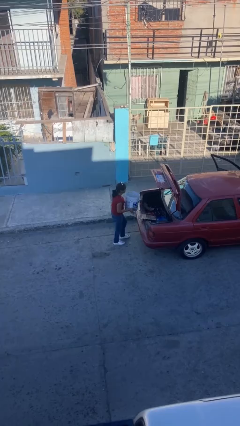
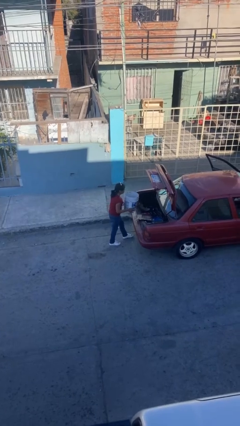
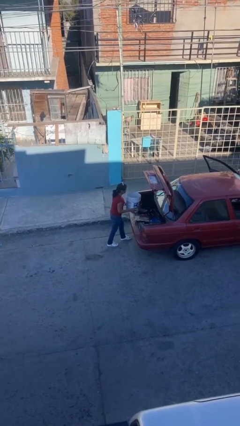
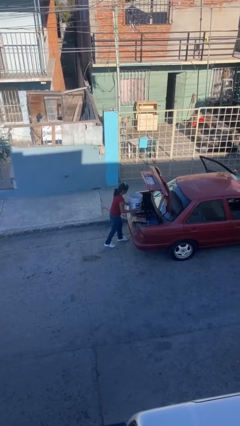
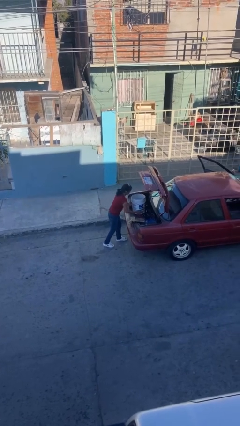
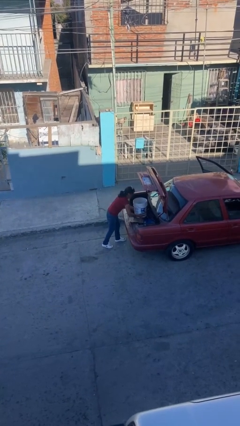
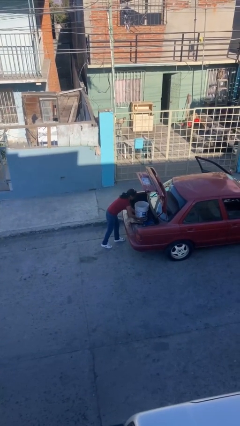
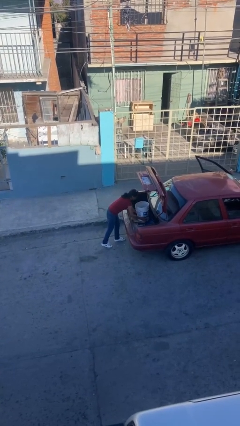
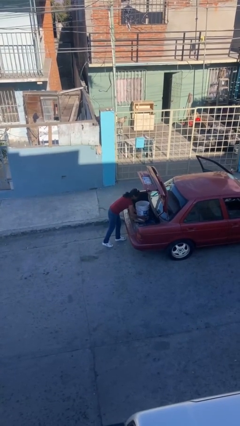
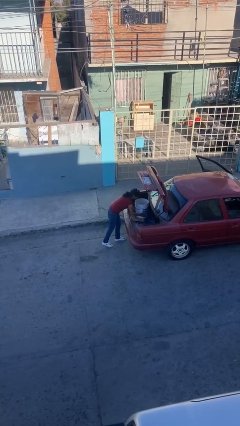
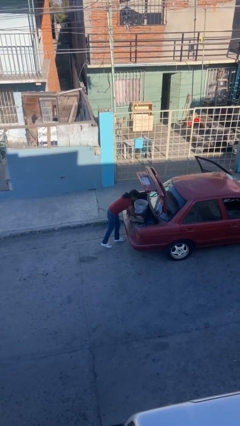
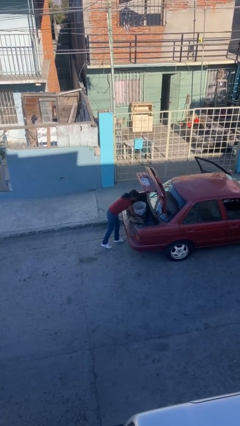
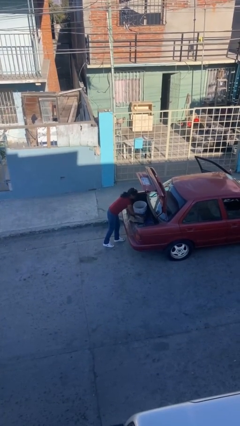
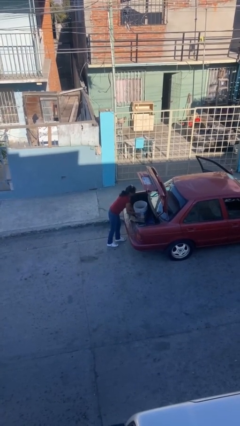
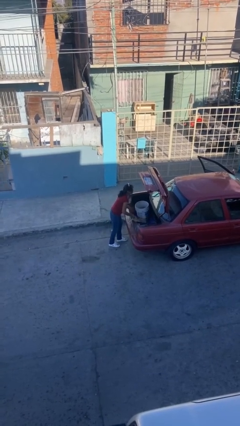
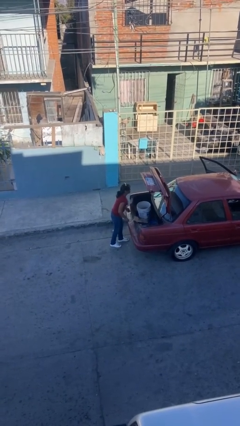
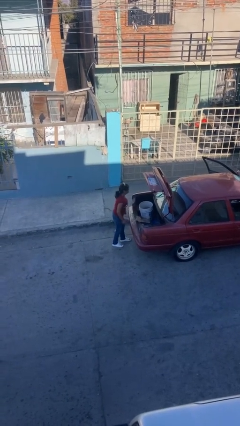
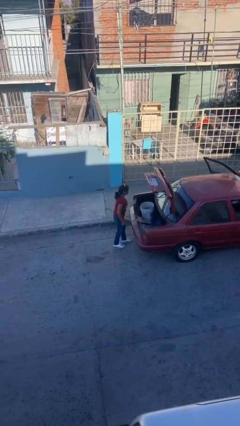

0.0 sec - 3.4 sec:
person loads car

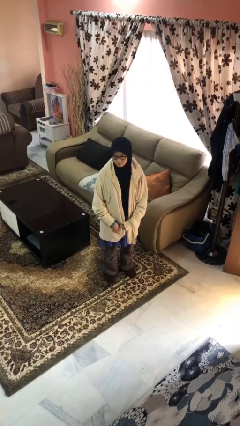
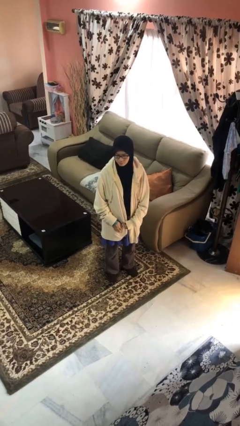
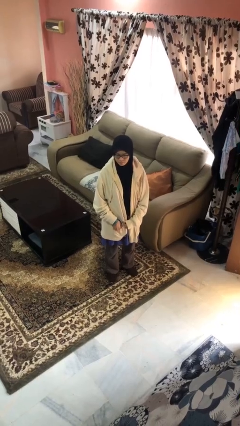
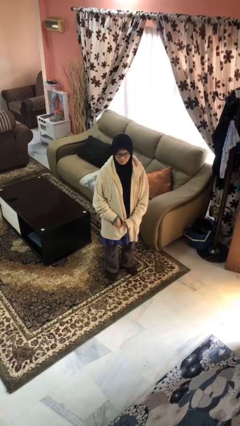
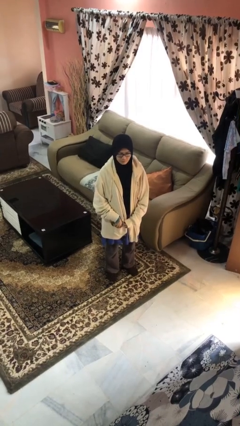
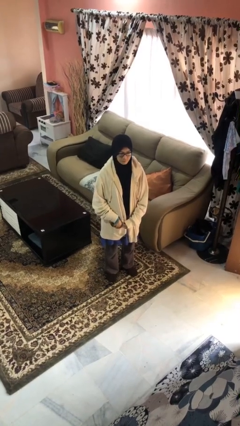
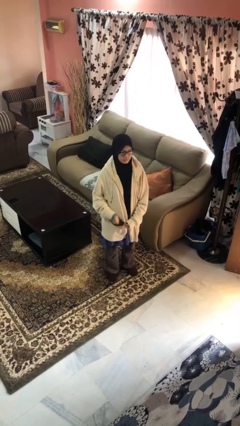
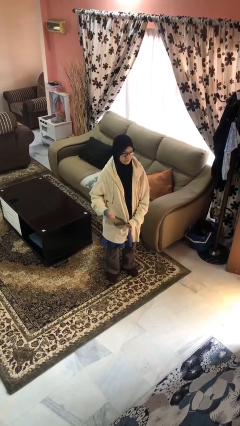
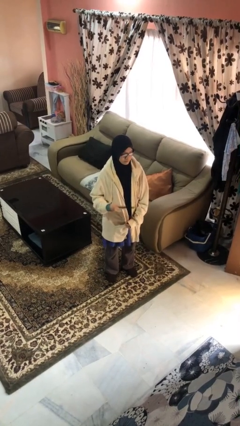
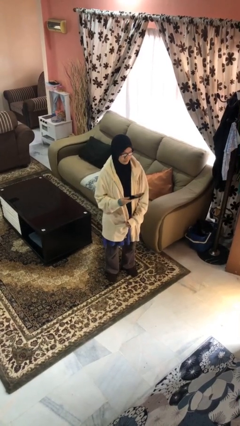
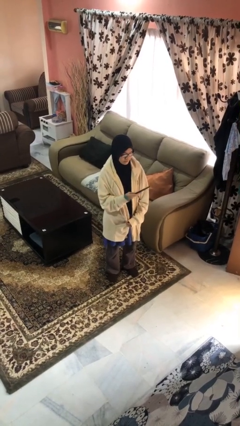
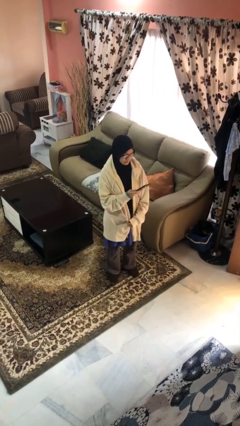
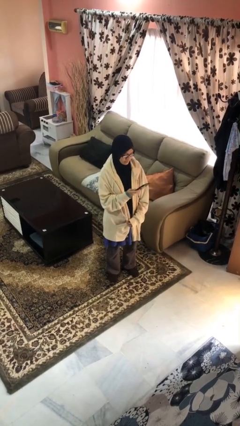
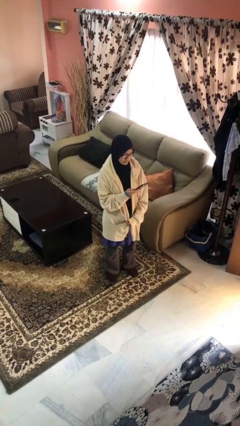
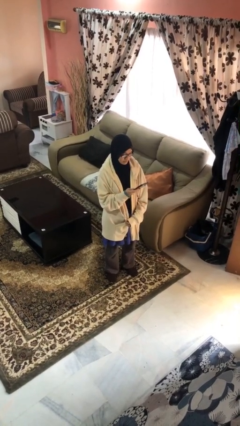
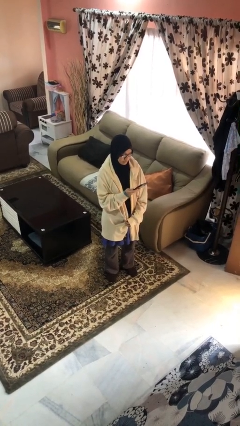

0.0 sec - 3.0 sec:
person takes phone from pocket

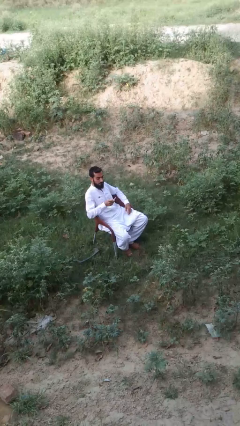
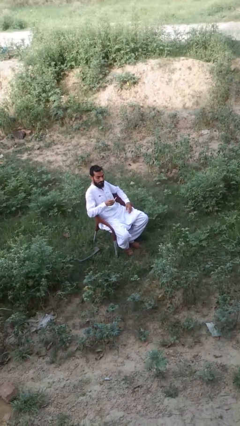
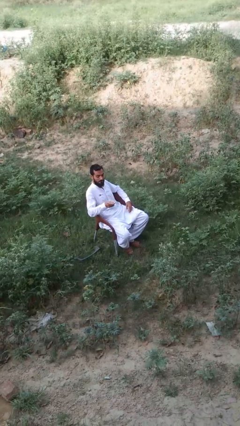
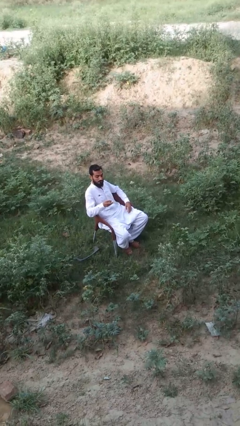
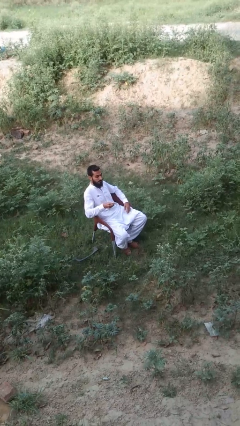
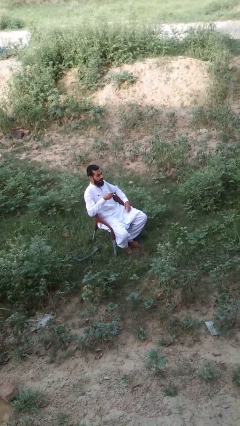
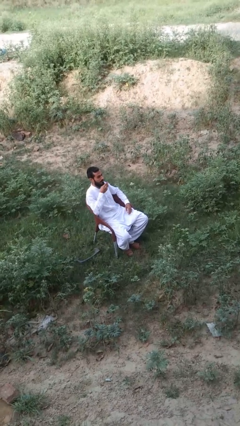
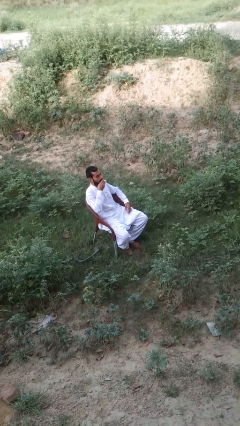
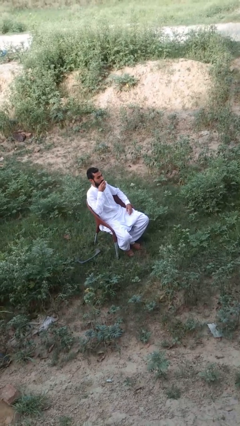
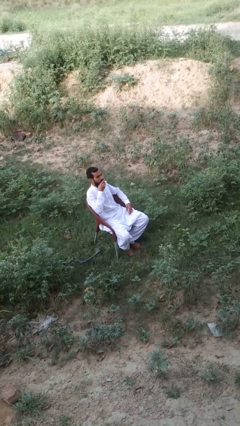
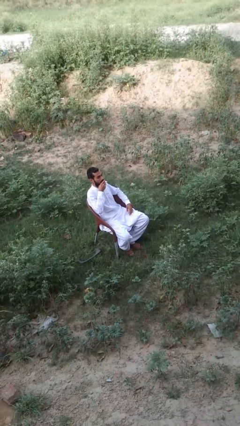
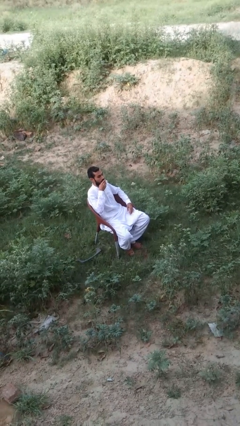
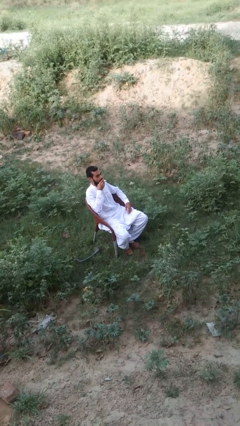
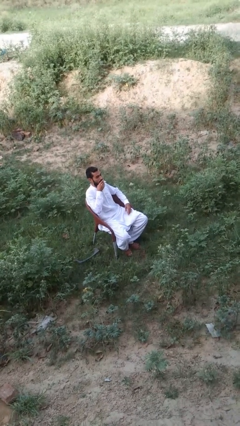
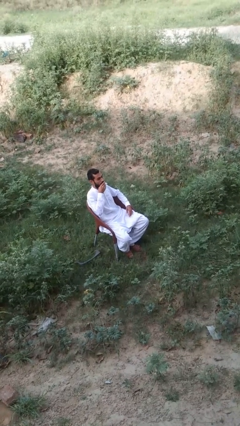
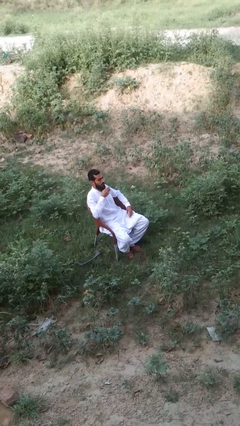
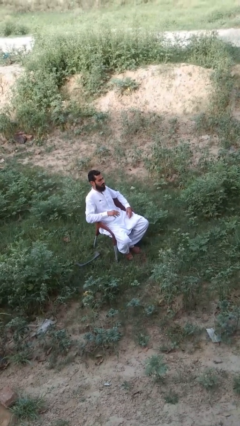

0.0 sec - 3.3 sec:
person vapes

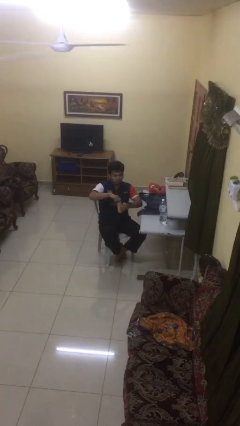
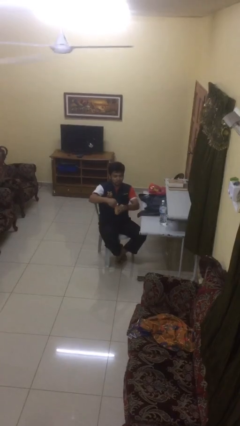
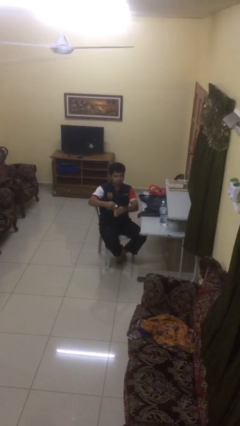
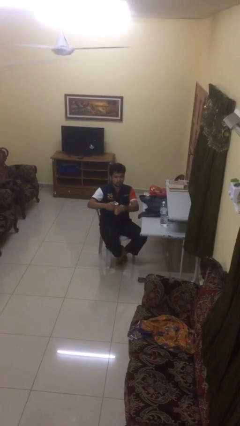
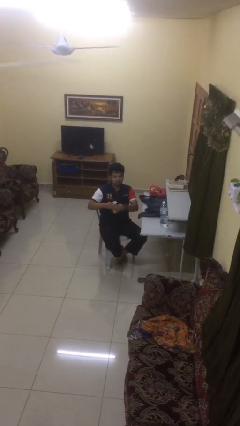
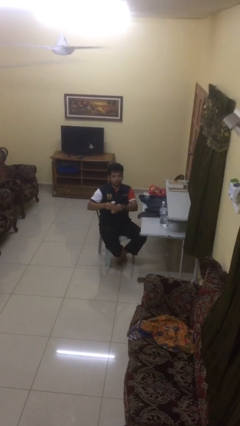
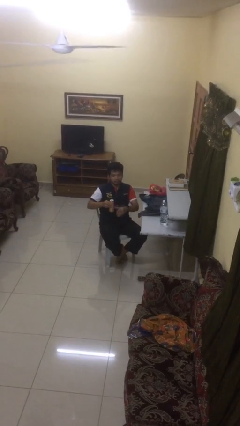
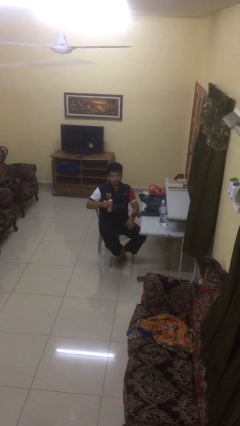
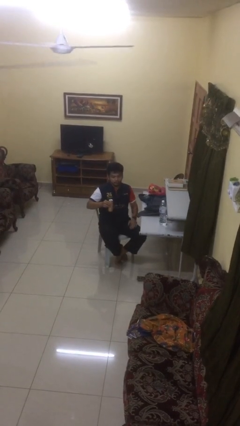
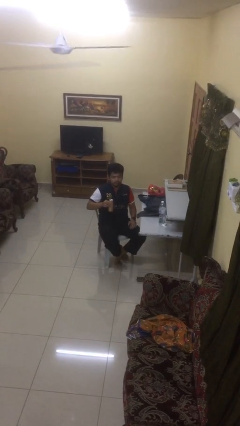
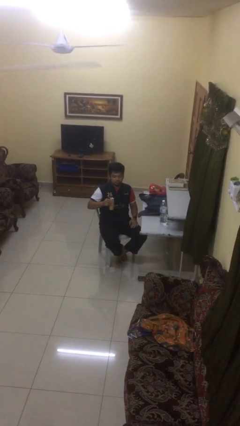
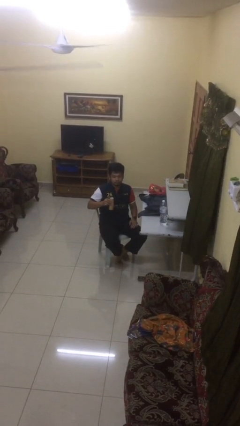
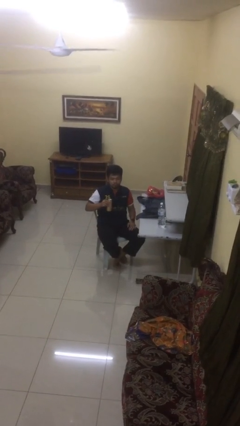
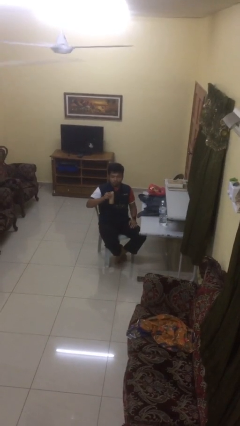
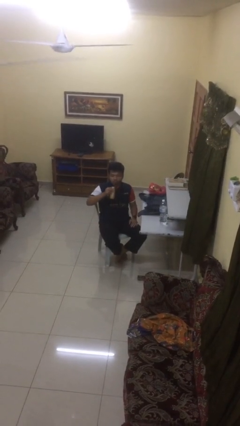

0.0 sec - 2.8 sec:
person opens beverage can

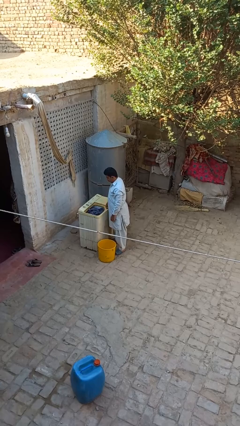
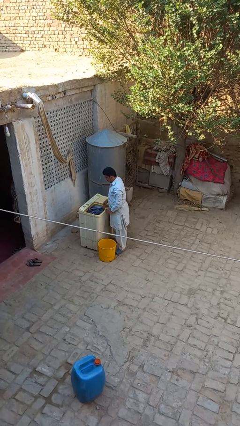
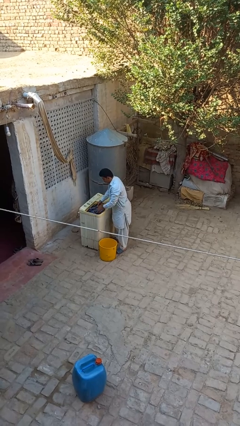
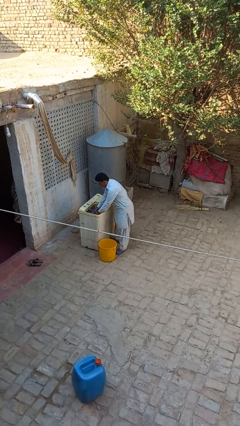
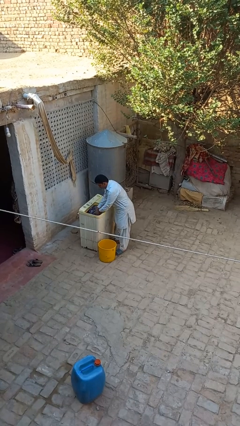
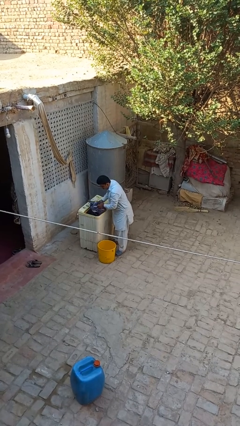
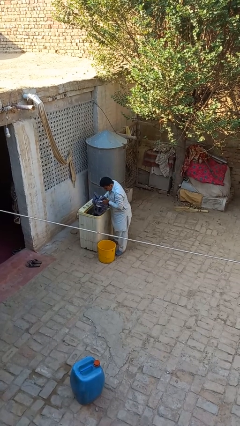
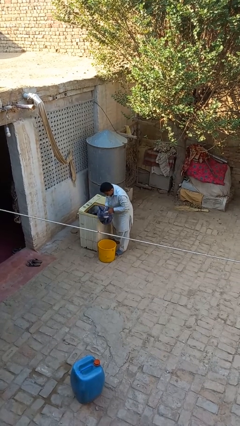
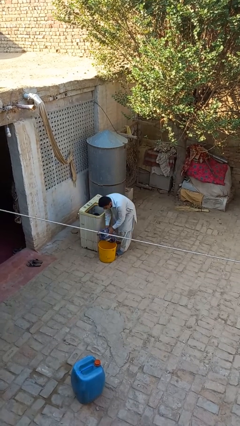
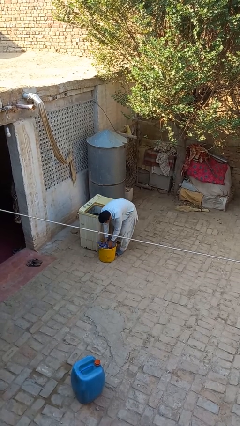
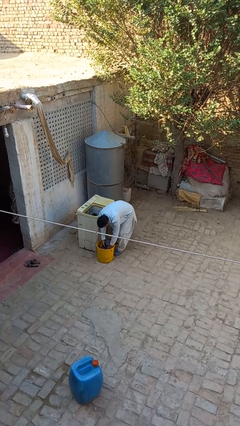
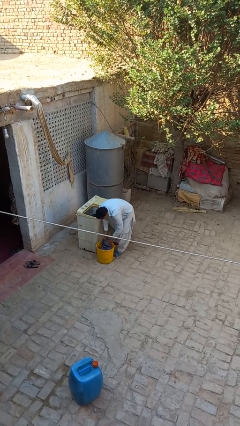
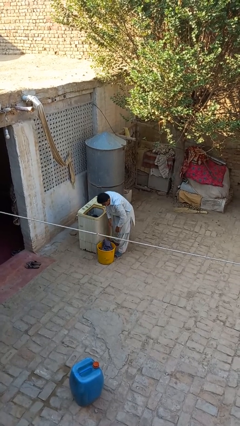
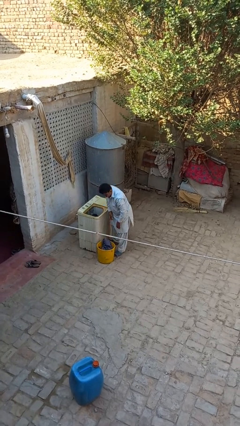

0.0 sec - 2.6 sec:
person unloads clotheswasher

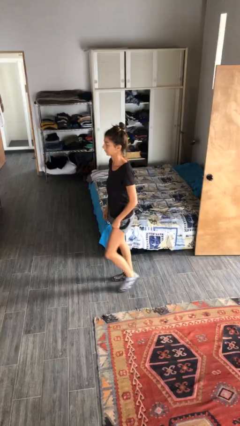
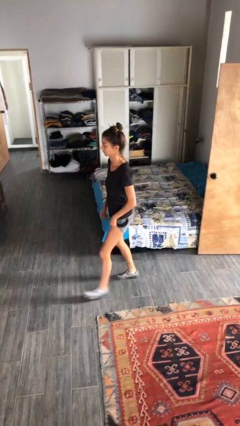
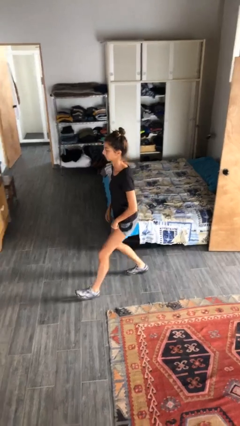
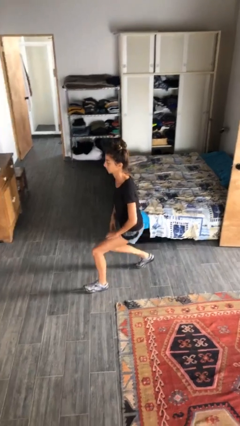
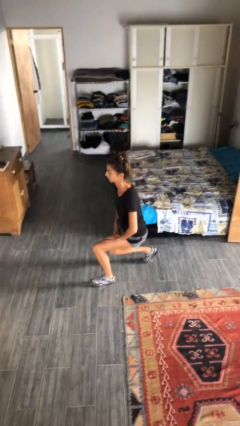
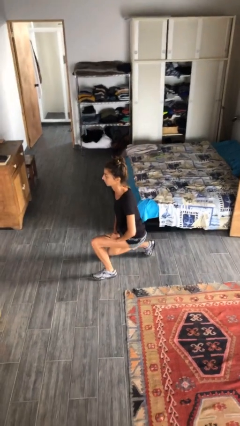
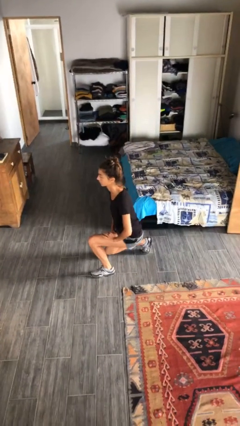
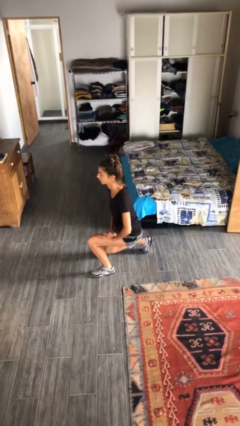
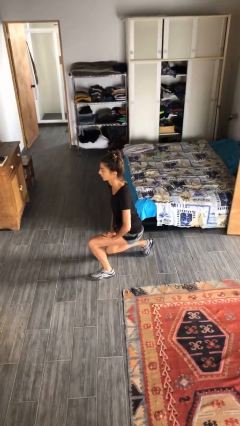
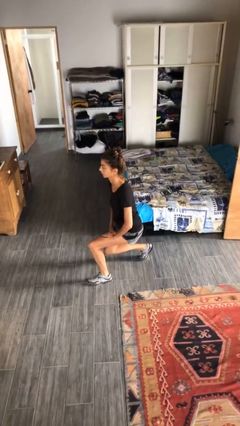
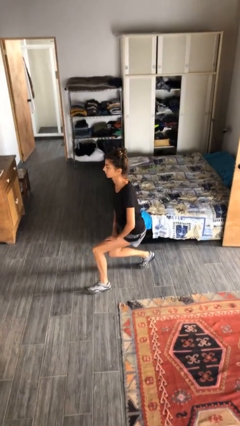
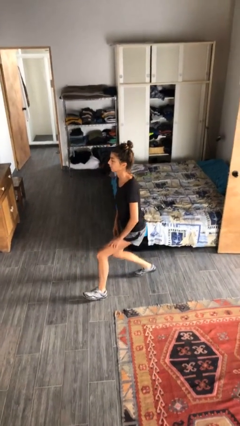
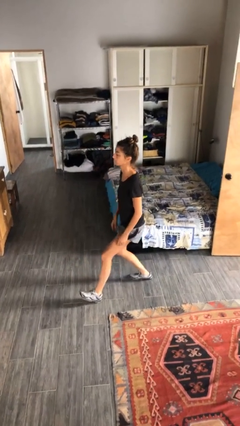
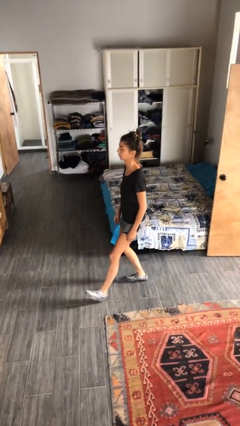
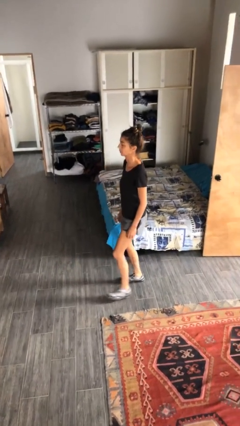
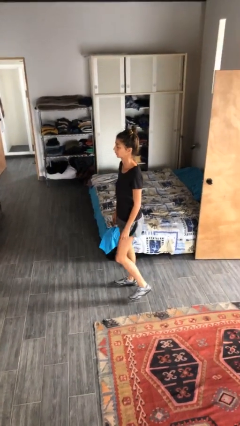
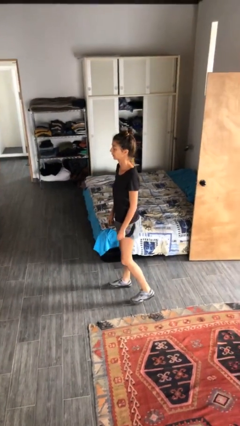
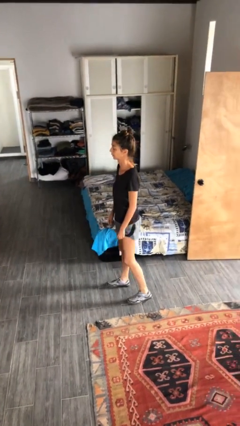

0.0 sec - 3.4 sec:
person exercises with lunges
